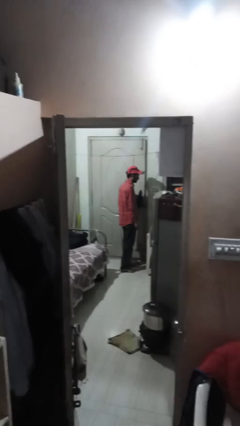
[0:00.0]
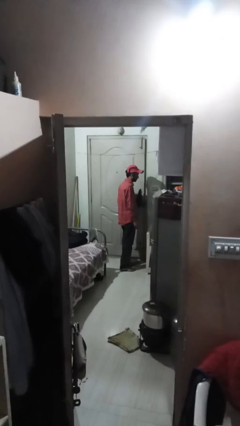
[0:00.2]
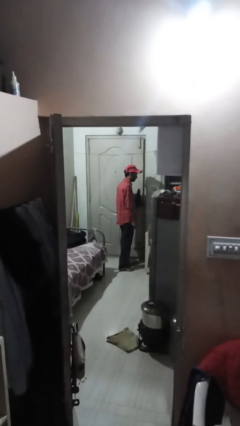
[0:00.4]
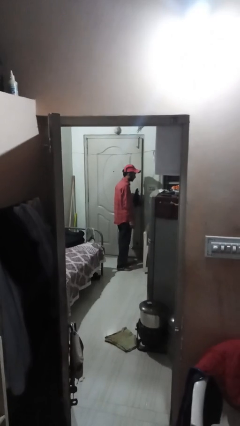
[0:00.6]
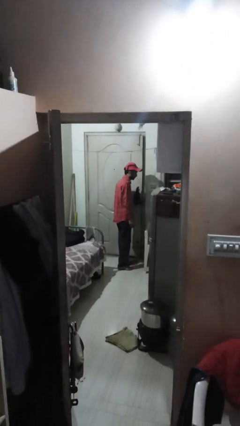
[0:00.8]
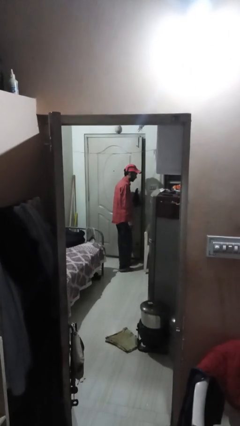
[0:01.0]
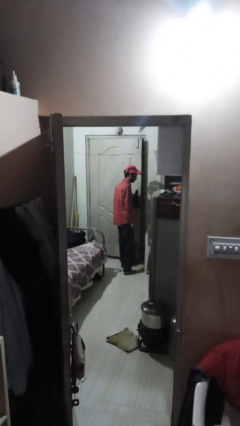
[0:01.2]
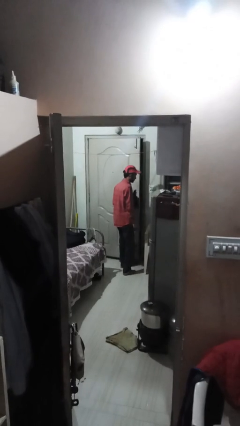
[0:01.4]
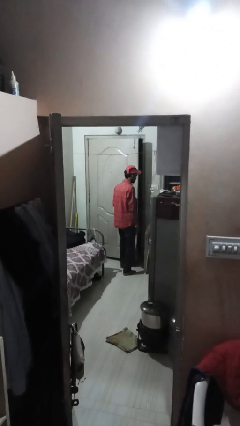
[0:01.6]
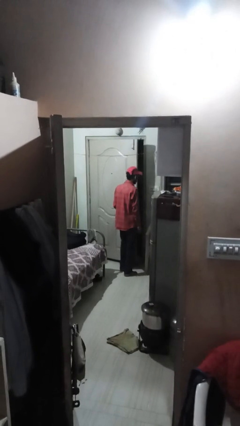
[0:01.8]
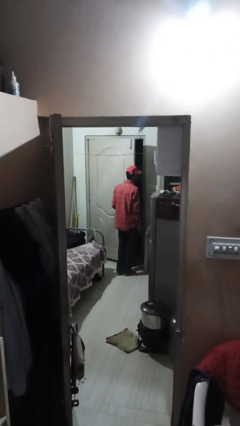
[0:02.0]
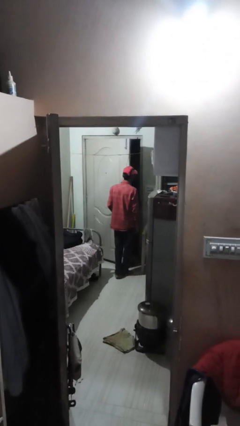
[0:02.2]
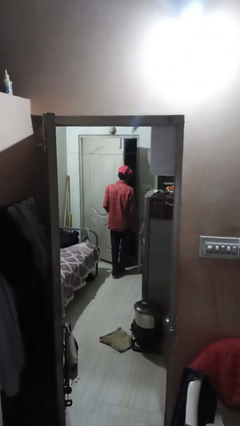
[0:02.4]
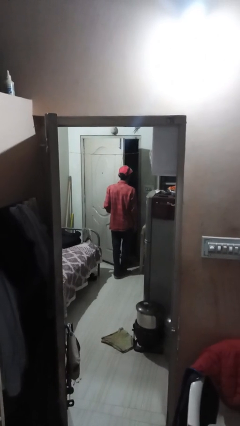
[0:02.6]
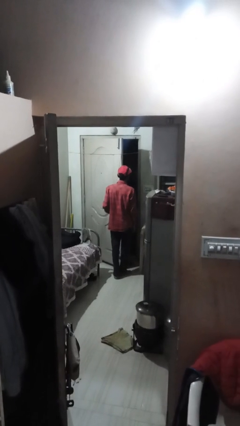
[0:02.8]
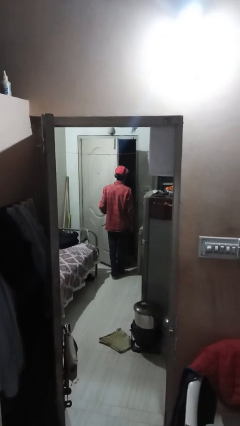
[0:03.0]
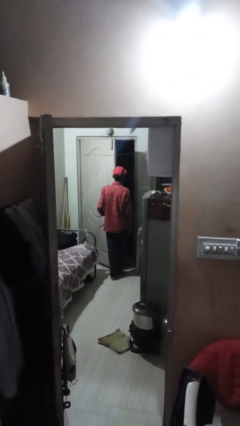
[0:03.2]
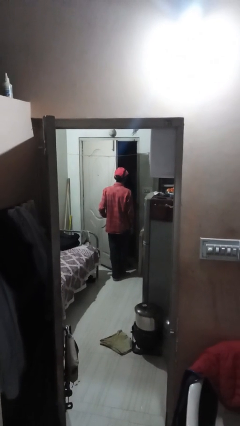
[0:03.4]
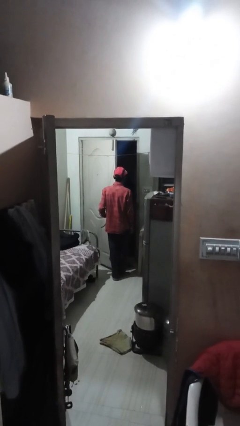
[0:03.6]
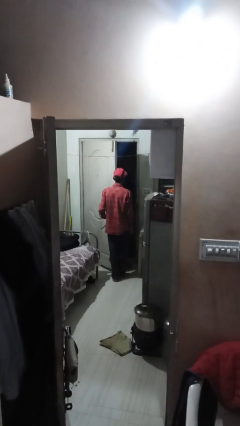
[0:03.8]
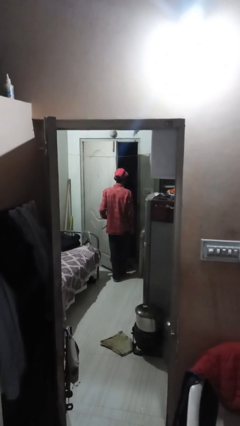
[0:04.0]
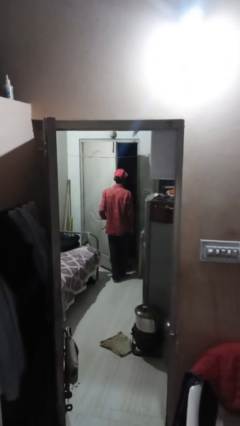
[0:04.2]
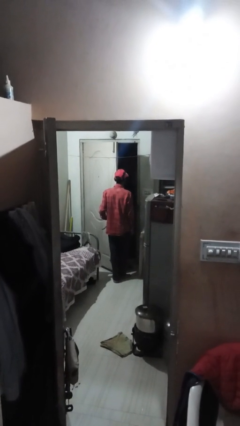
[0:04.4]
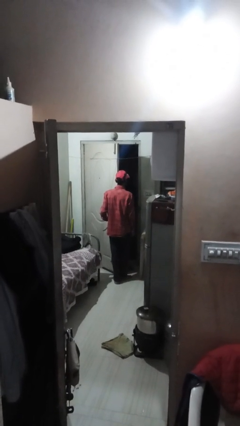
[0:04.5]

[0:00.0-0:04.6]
person opens facility door

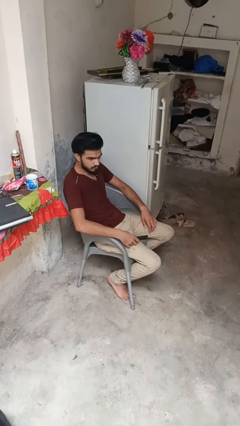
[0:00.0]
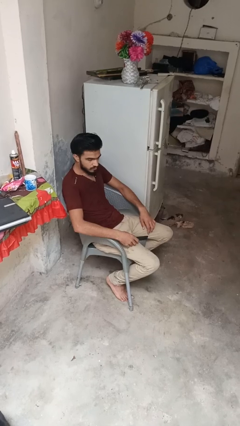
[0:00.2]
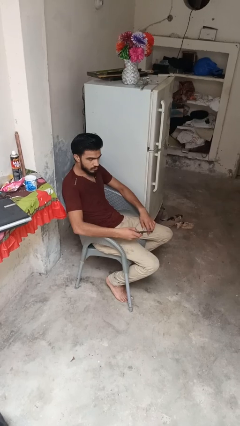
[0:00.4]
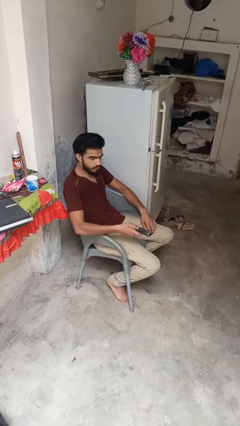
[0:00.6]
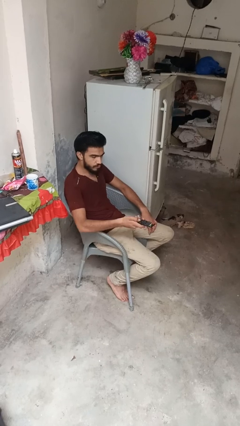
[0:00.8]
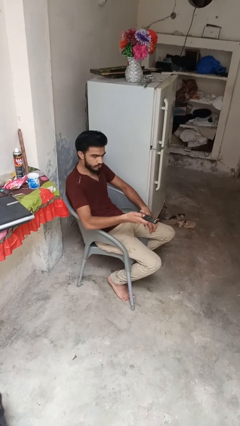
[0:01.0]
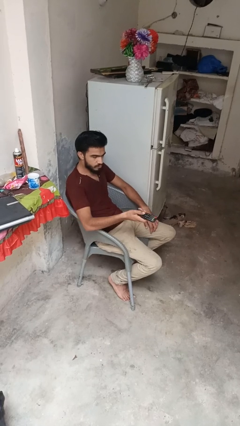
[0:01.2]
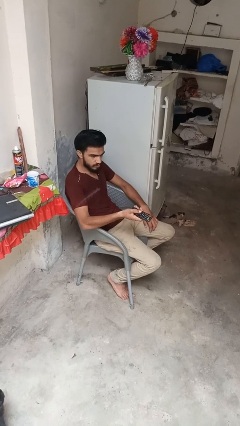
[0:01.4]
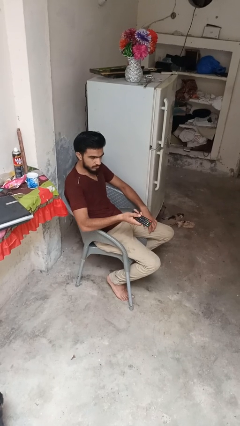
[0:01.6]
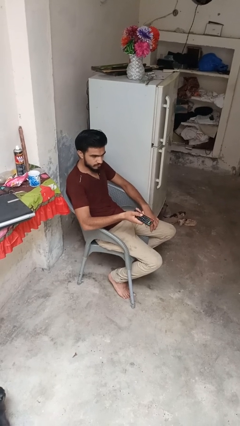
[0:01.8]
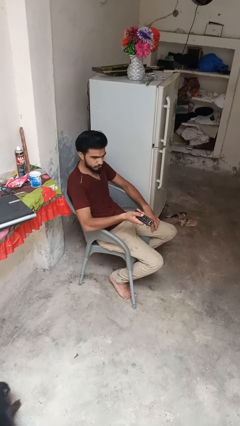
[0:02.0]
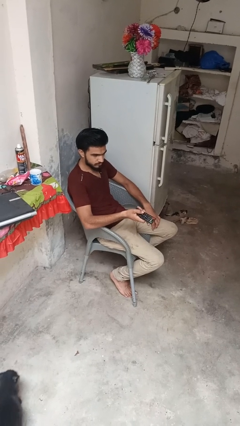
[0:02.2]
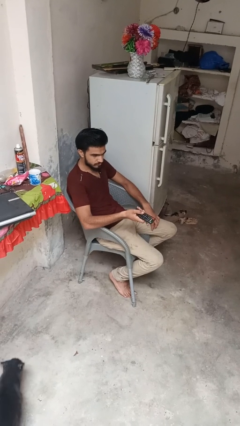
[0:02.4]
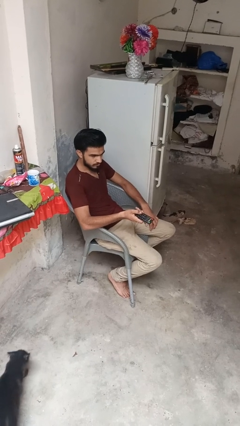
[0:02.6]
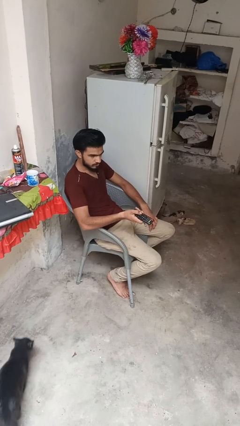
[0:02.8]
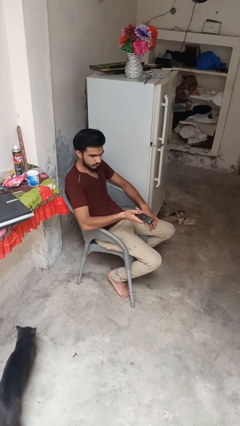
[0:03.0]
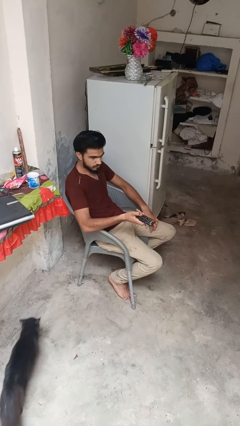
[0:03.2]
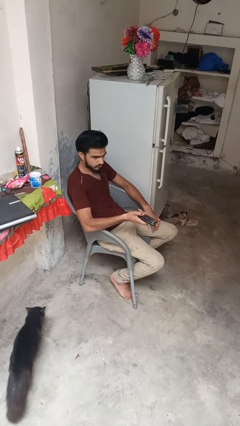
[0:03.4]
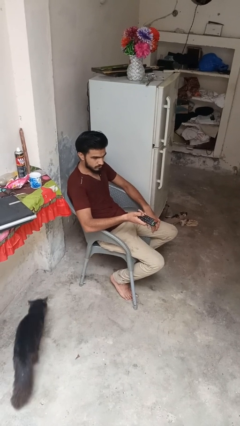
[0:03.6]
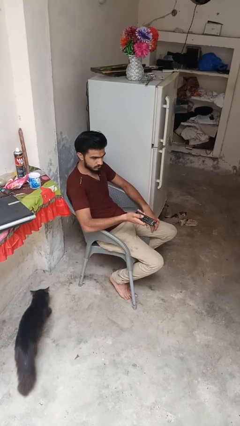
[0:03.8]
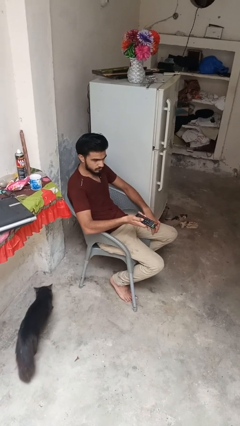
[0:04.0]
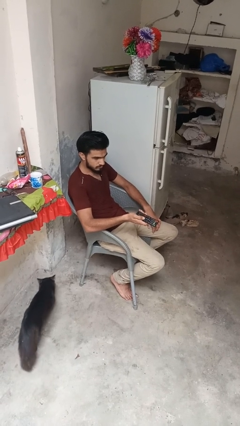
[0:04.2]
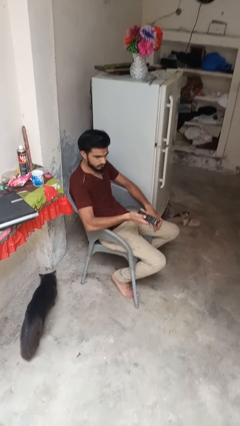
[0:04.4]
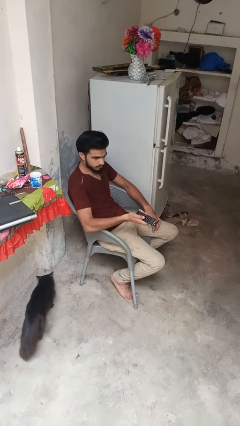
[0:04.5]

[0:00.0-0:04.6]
person uses television remote

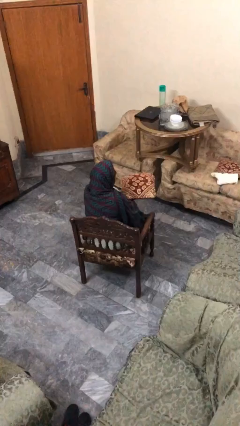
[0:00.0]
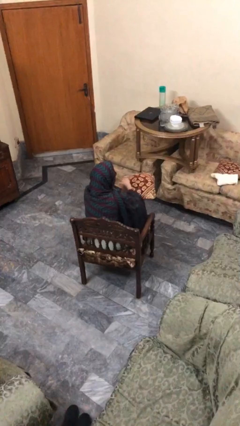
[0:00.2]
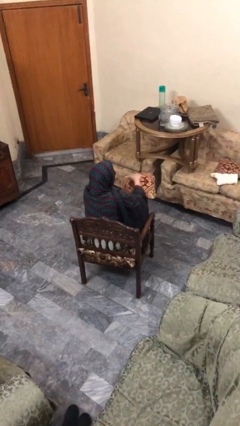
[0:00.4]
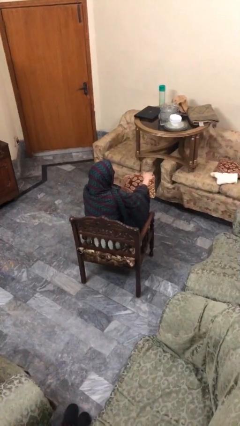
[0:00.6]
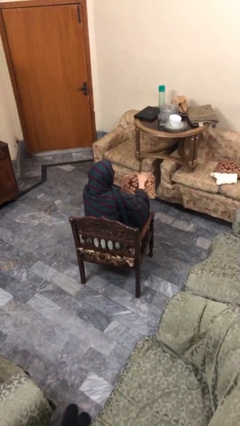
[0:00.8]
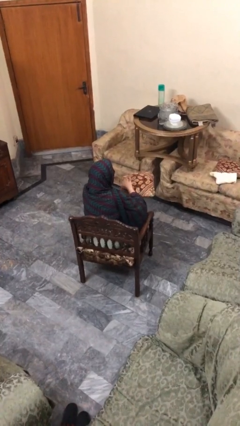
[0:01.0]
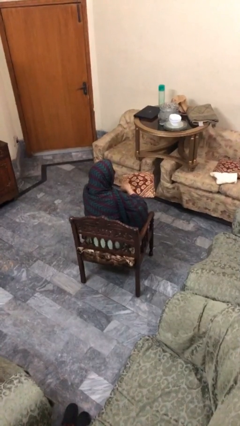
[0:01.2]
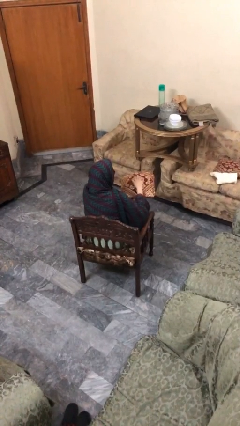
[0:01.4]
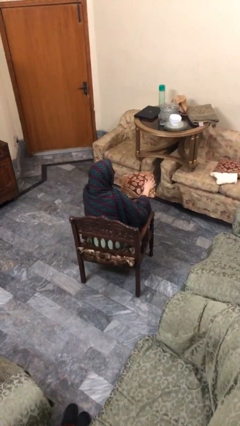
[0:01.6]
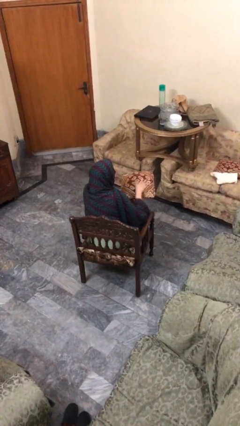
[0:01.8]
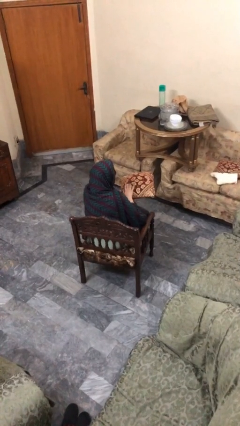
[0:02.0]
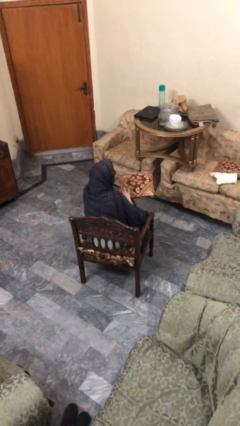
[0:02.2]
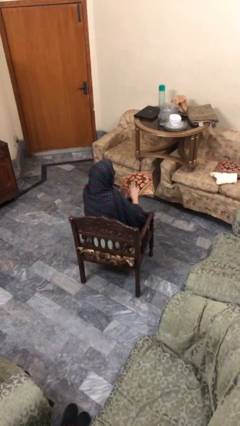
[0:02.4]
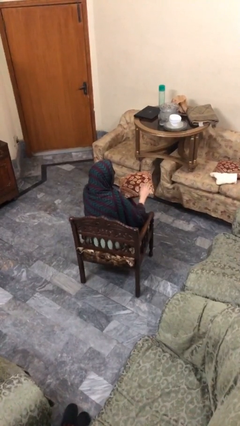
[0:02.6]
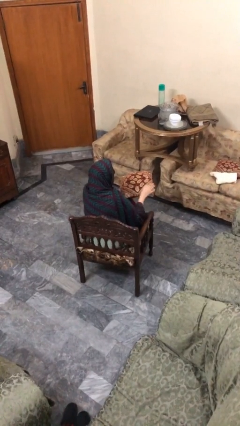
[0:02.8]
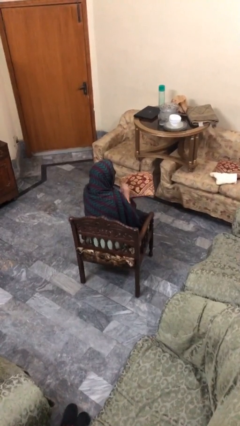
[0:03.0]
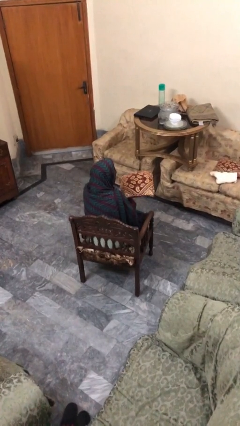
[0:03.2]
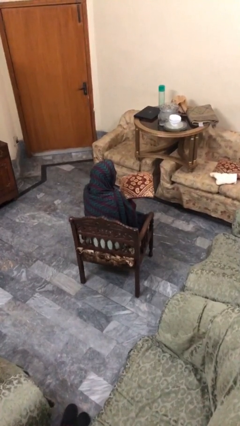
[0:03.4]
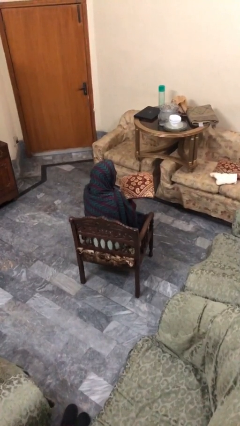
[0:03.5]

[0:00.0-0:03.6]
person waves hand over object

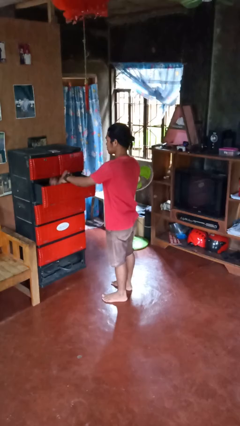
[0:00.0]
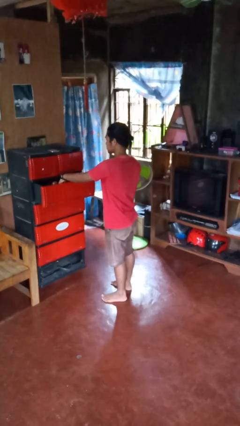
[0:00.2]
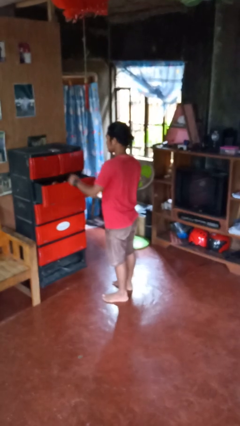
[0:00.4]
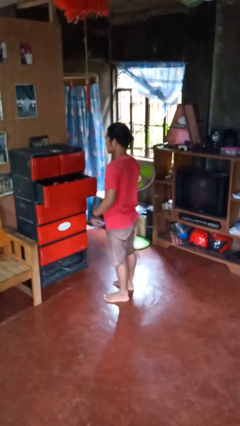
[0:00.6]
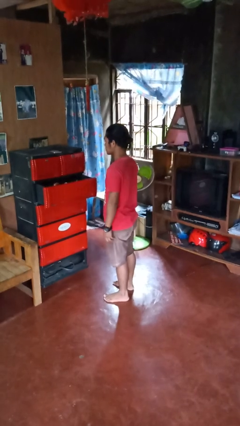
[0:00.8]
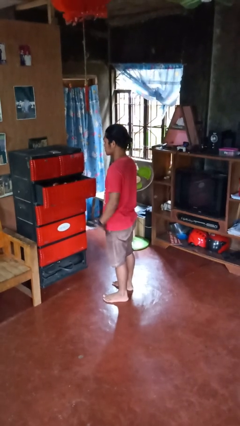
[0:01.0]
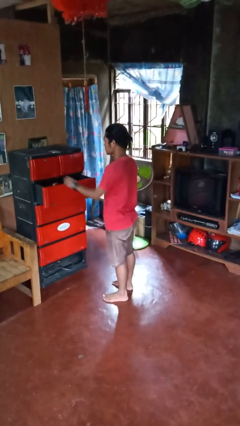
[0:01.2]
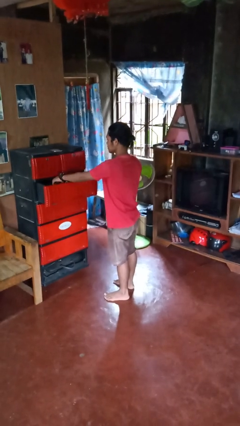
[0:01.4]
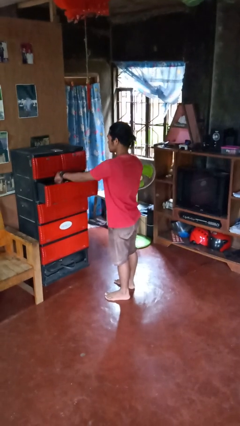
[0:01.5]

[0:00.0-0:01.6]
person puts clothes into dresser

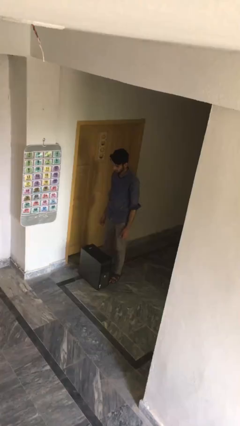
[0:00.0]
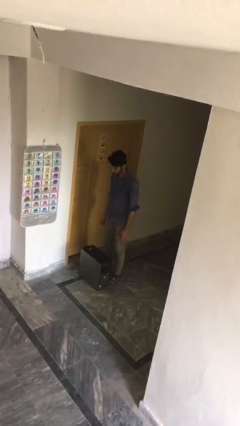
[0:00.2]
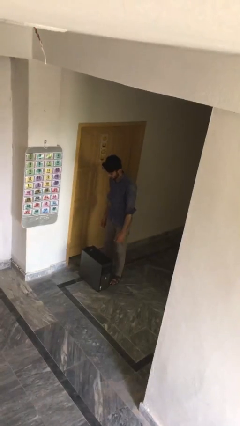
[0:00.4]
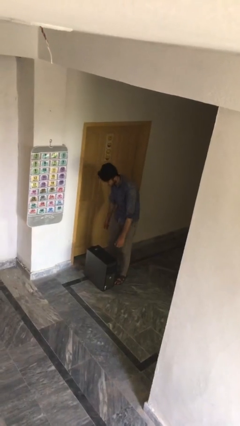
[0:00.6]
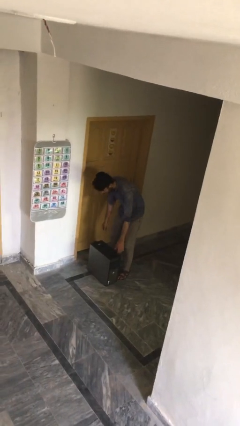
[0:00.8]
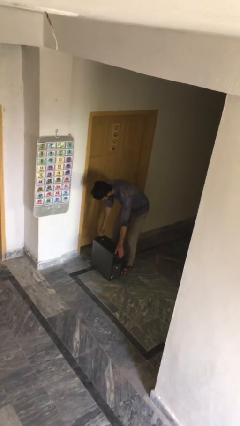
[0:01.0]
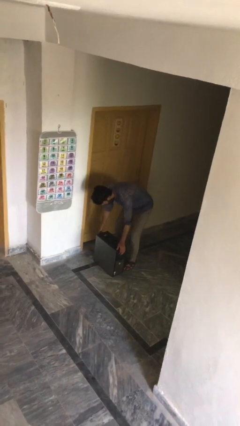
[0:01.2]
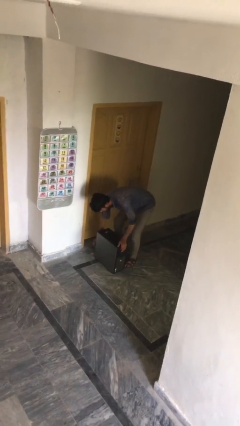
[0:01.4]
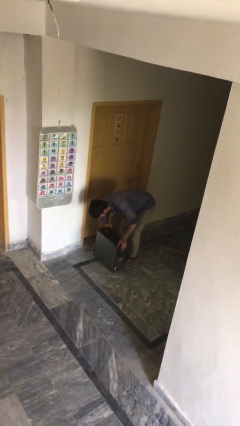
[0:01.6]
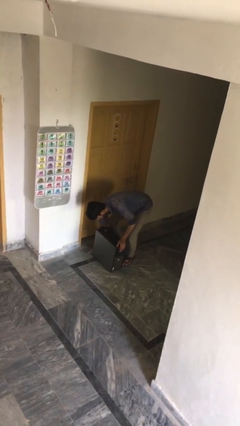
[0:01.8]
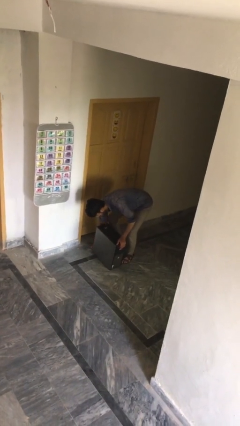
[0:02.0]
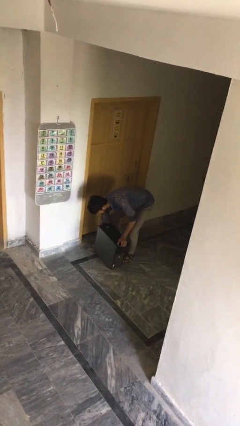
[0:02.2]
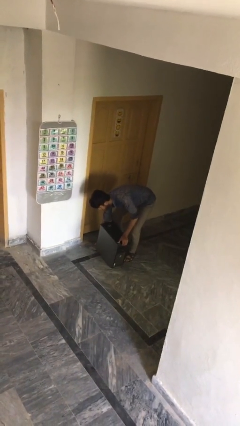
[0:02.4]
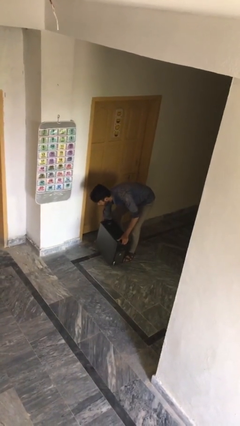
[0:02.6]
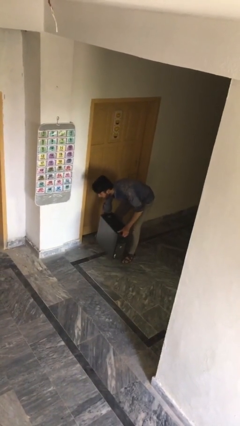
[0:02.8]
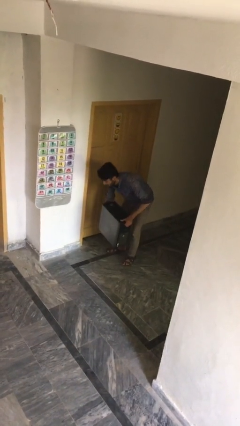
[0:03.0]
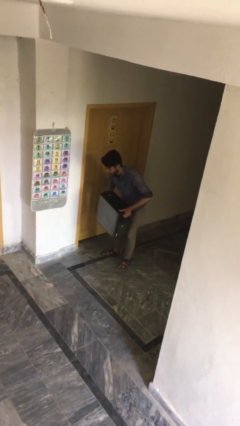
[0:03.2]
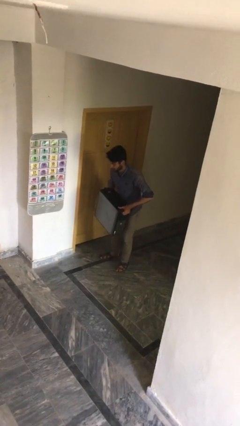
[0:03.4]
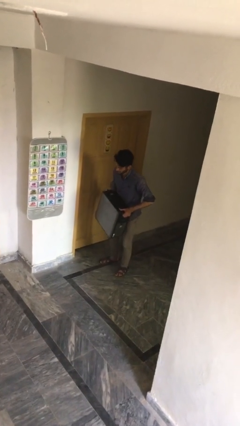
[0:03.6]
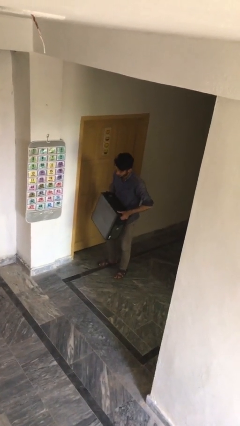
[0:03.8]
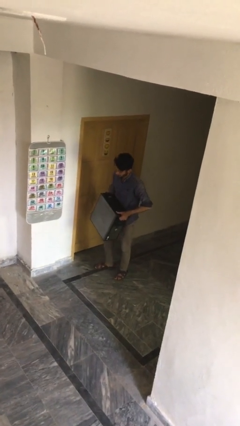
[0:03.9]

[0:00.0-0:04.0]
person picks up object from floor
